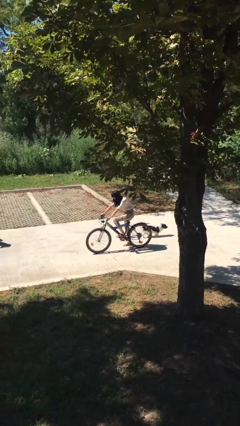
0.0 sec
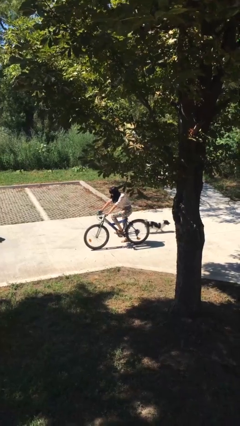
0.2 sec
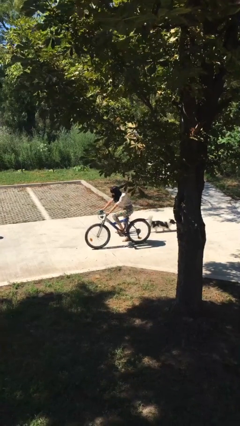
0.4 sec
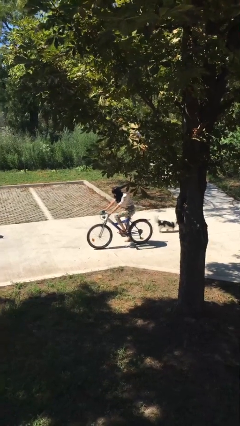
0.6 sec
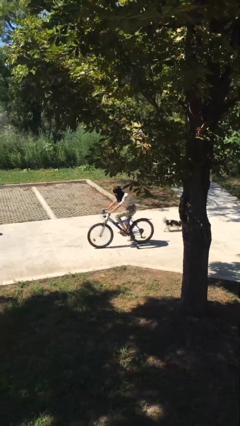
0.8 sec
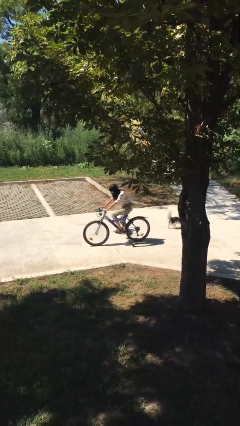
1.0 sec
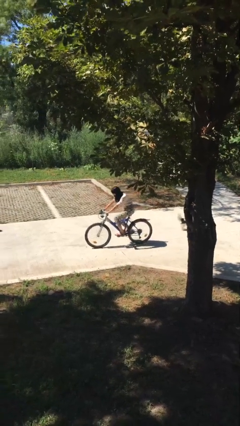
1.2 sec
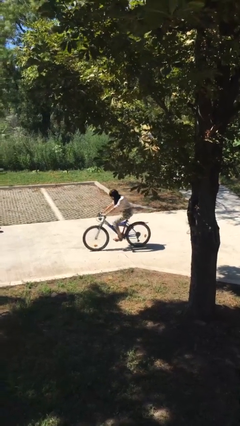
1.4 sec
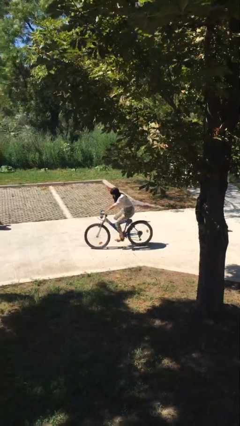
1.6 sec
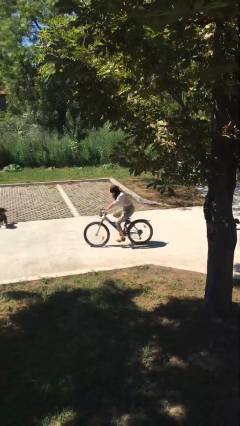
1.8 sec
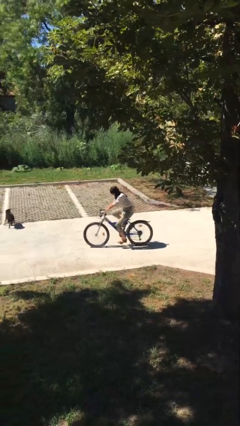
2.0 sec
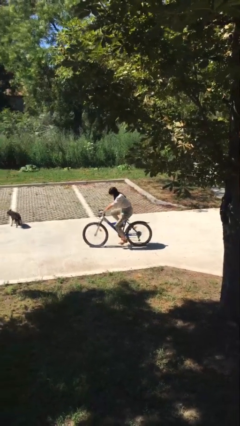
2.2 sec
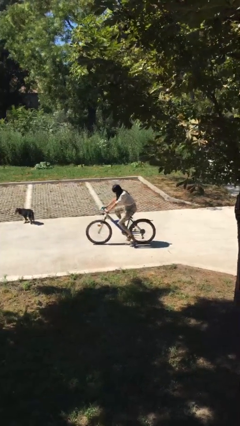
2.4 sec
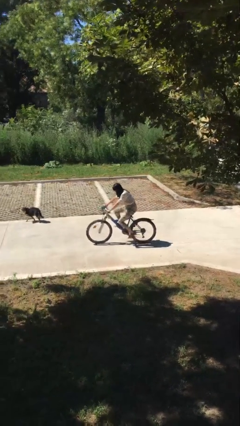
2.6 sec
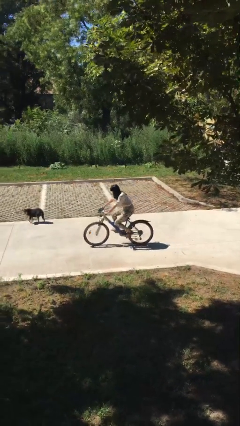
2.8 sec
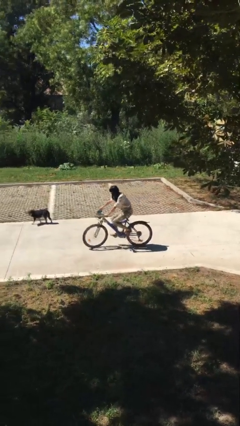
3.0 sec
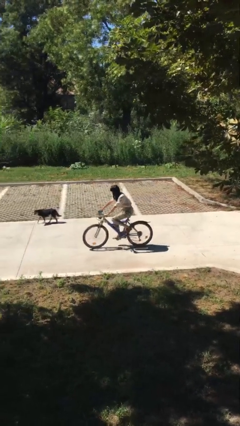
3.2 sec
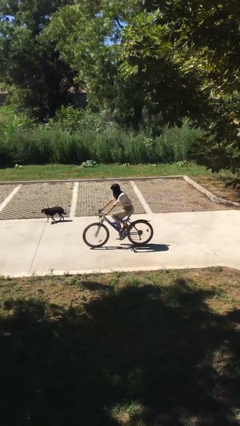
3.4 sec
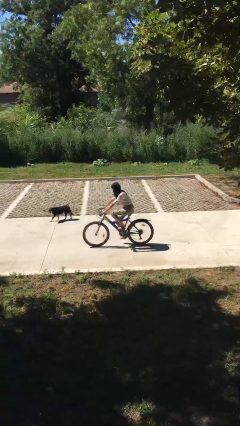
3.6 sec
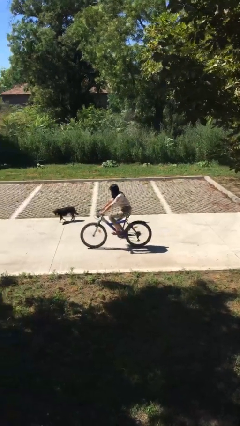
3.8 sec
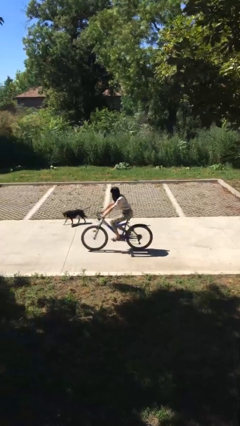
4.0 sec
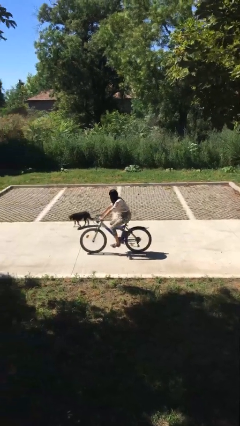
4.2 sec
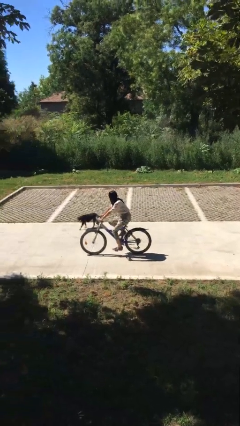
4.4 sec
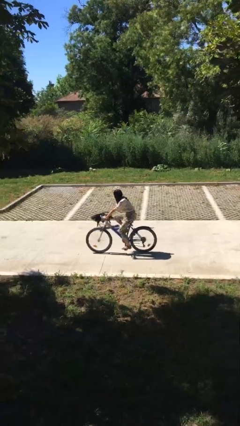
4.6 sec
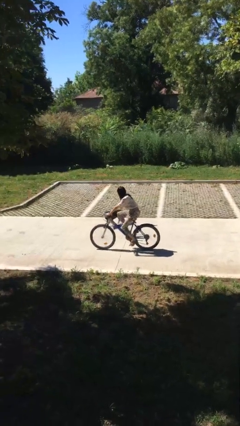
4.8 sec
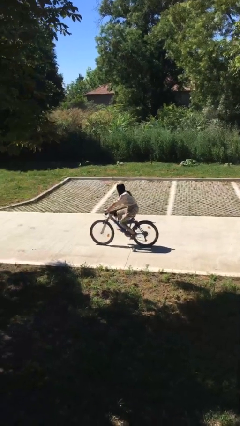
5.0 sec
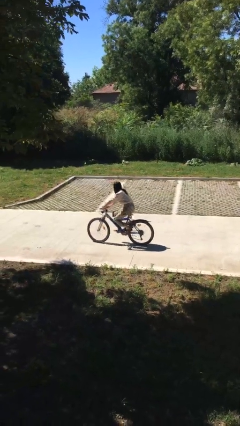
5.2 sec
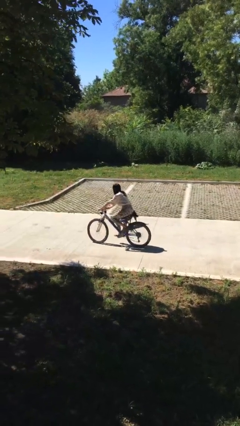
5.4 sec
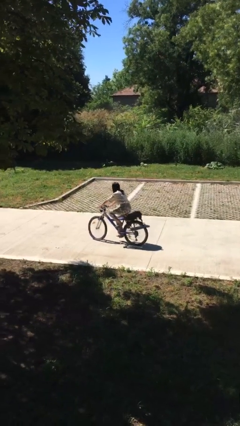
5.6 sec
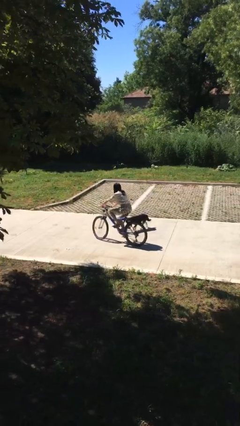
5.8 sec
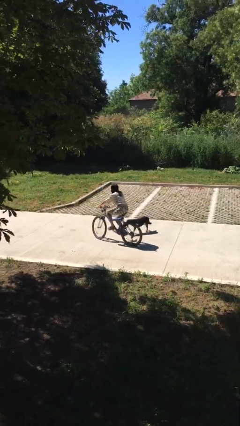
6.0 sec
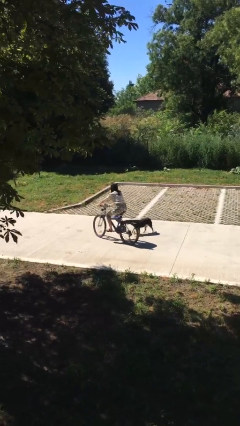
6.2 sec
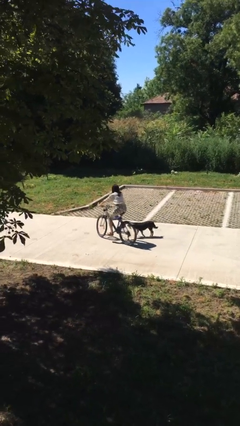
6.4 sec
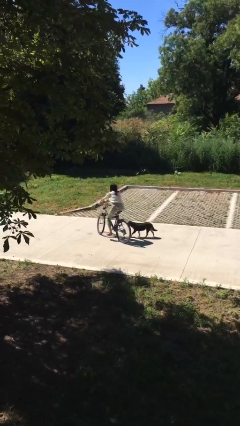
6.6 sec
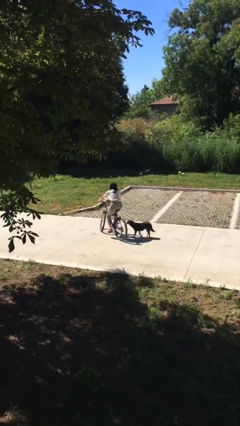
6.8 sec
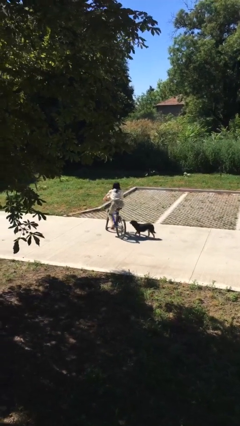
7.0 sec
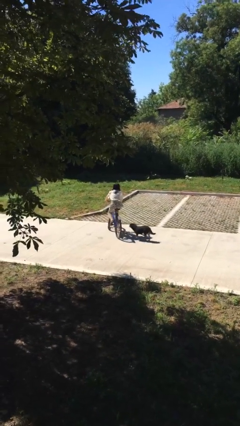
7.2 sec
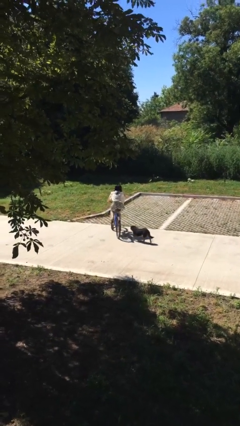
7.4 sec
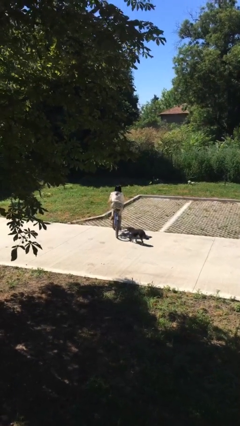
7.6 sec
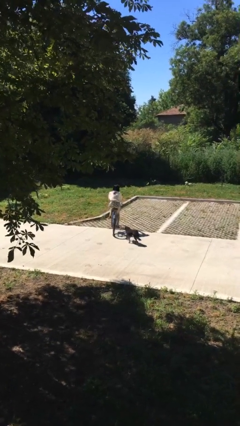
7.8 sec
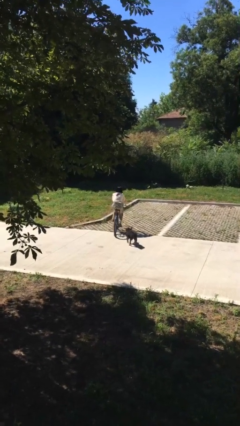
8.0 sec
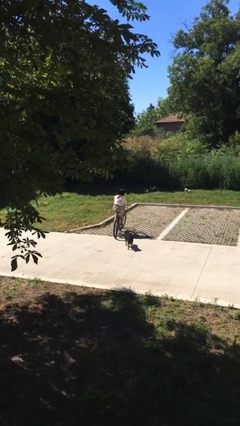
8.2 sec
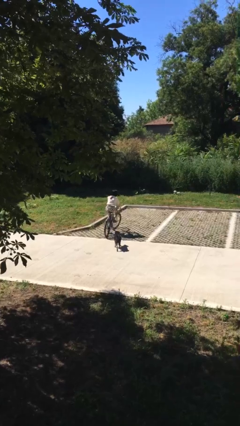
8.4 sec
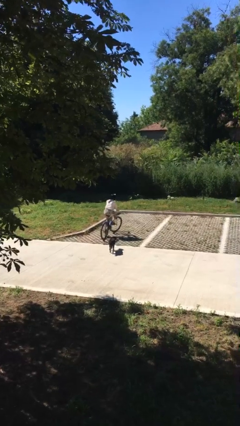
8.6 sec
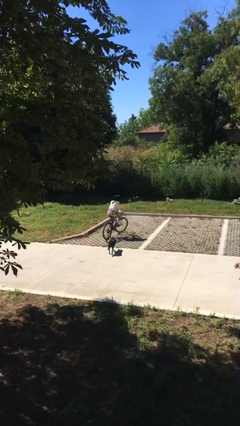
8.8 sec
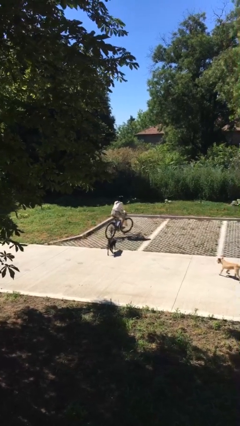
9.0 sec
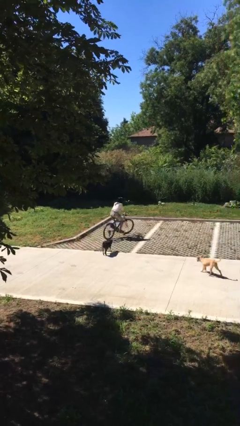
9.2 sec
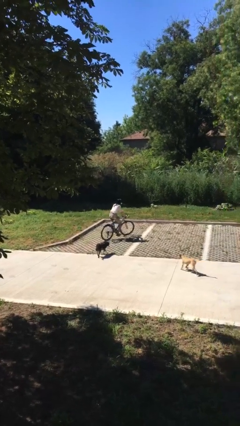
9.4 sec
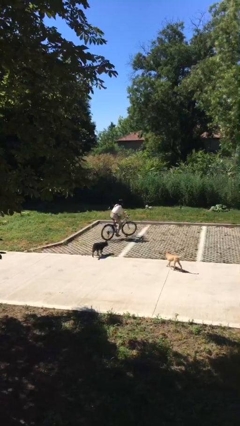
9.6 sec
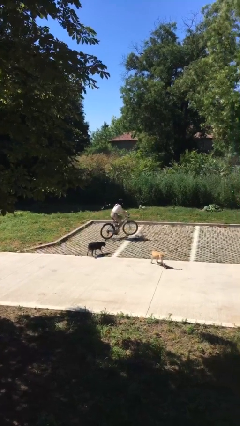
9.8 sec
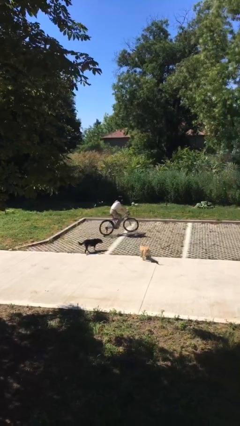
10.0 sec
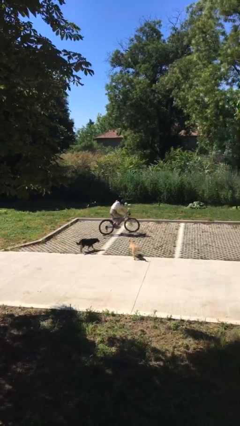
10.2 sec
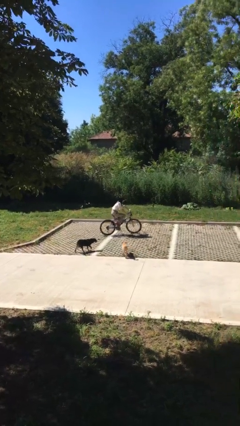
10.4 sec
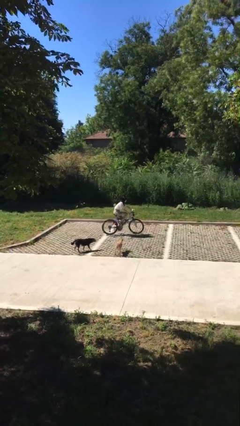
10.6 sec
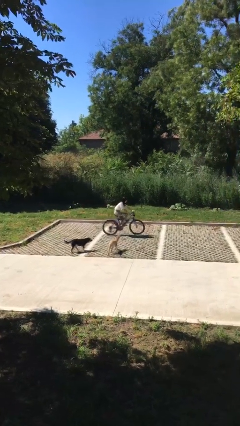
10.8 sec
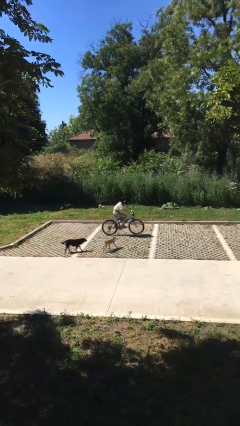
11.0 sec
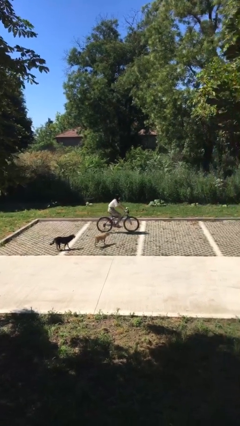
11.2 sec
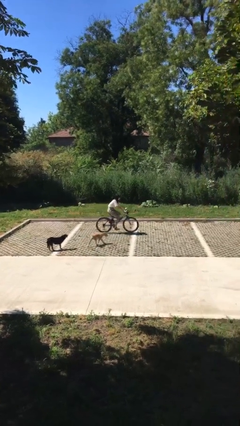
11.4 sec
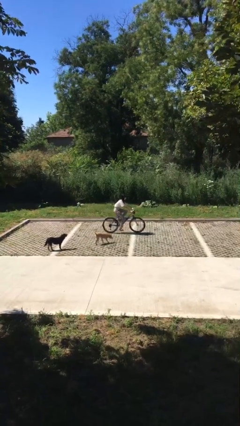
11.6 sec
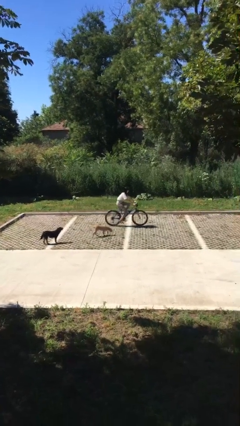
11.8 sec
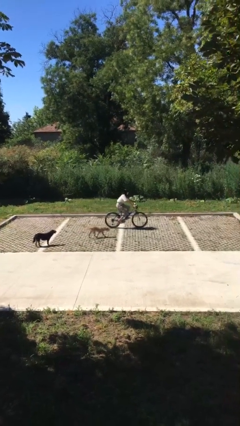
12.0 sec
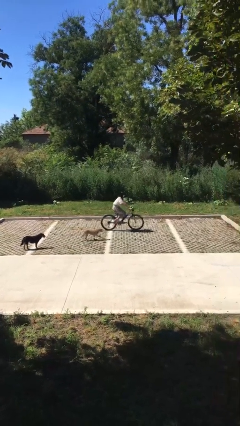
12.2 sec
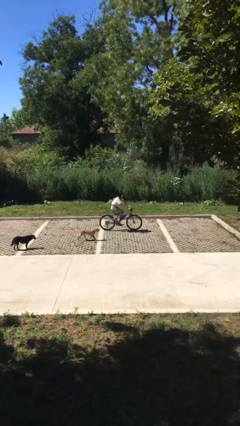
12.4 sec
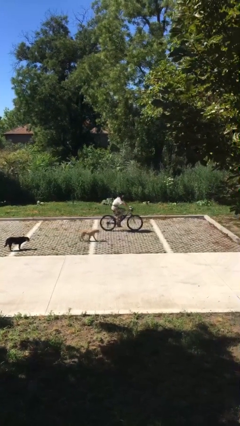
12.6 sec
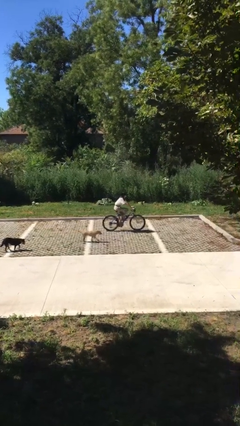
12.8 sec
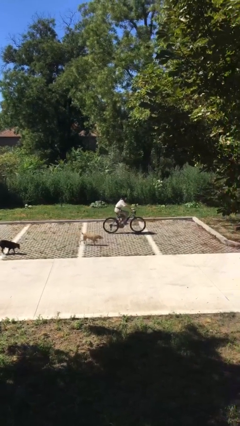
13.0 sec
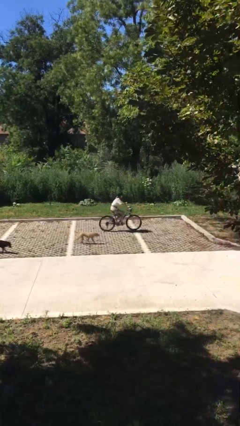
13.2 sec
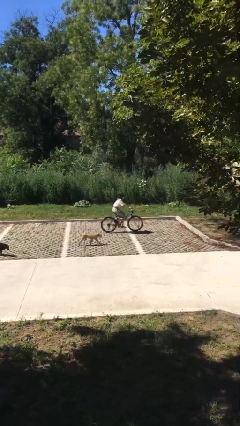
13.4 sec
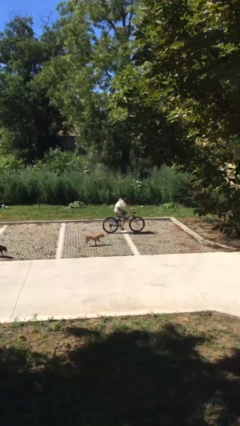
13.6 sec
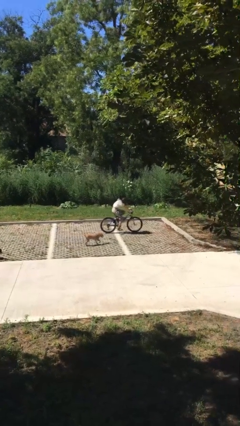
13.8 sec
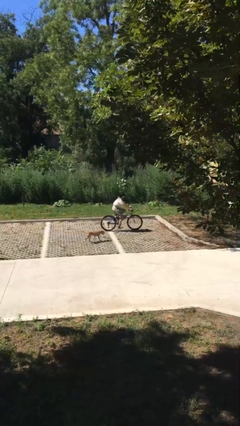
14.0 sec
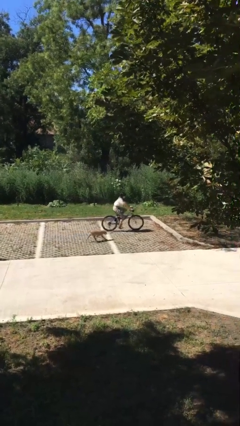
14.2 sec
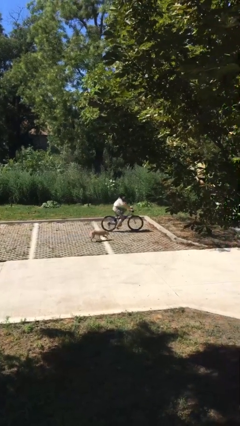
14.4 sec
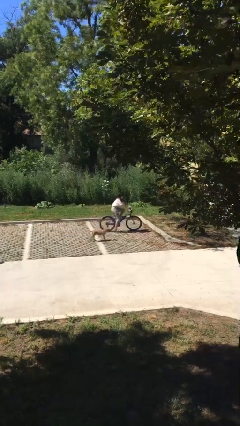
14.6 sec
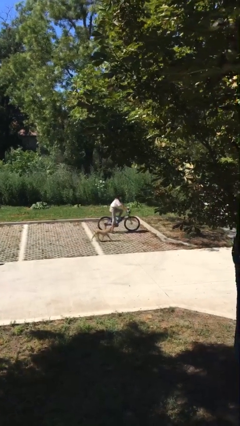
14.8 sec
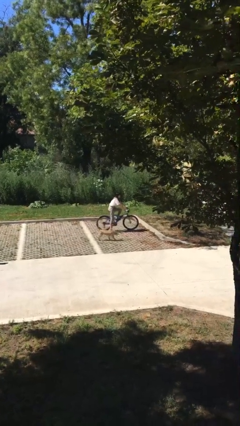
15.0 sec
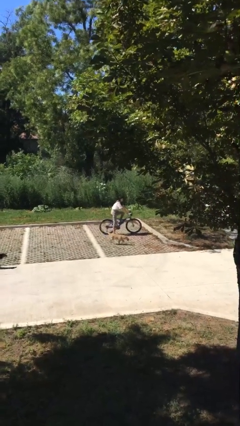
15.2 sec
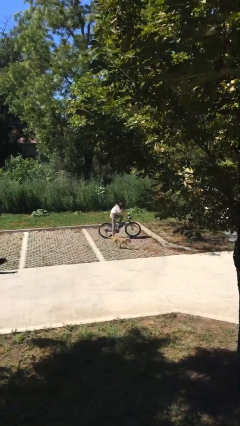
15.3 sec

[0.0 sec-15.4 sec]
person rides bicycle

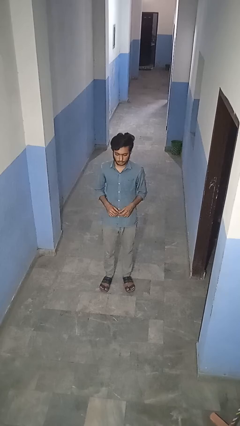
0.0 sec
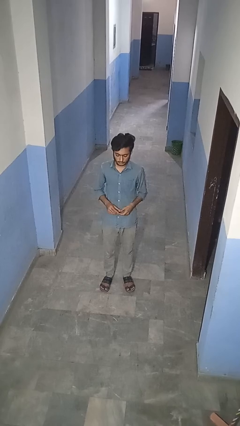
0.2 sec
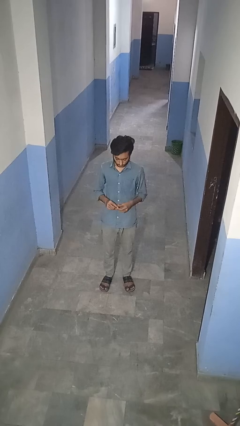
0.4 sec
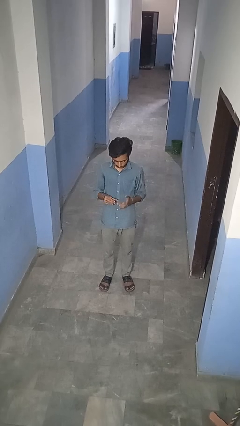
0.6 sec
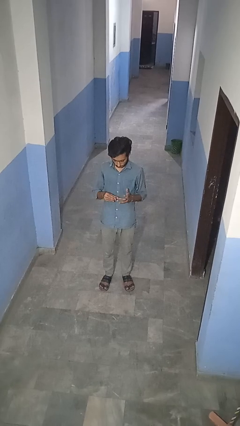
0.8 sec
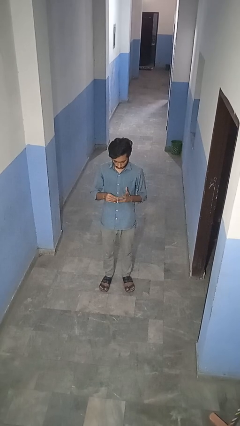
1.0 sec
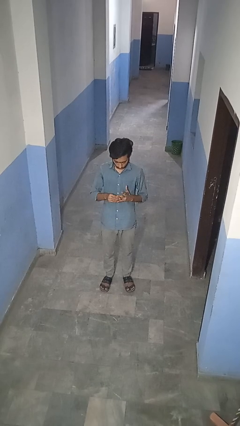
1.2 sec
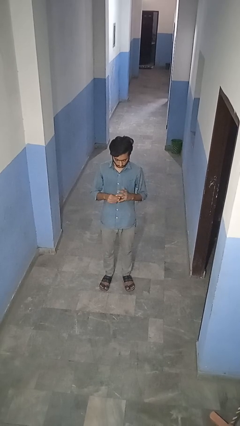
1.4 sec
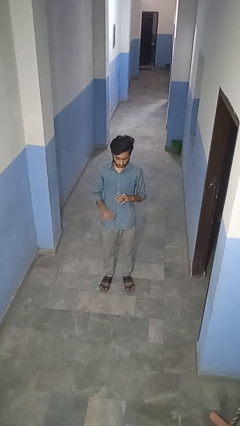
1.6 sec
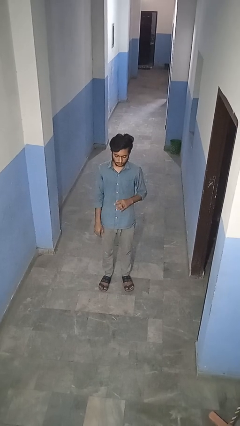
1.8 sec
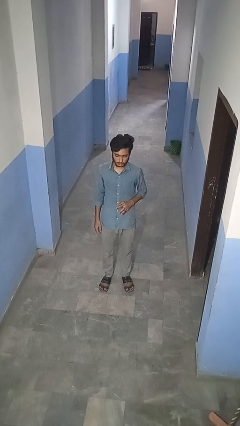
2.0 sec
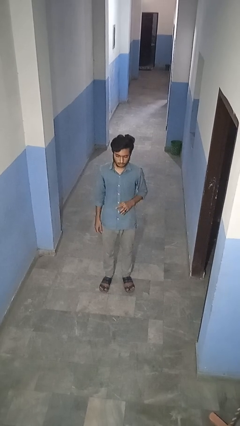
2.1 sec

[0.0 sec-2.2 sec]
person puts on ring

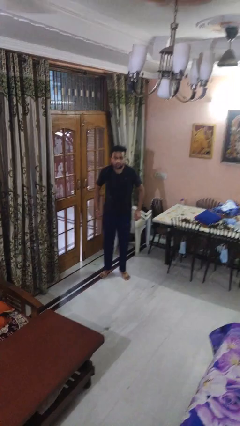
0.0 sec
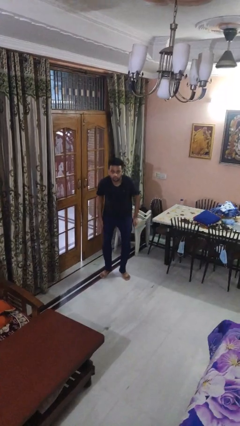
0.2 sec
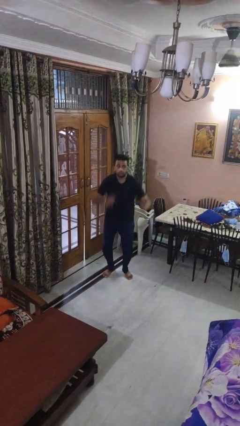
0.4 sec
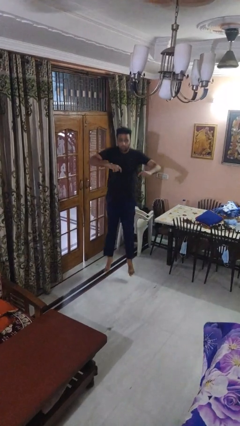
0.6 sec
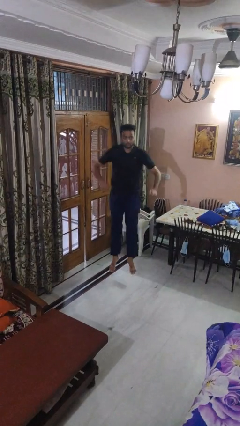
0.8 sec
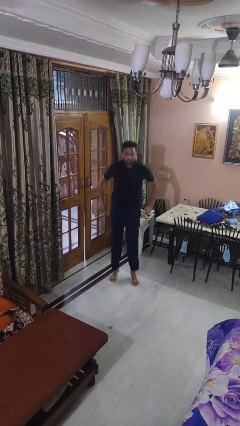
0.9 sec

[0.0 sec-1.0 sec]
person jumps
